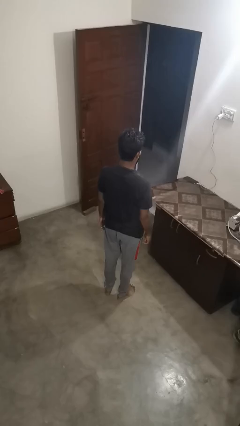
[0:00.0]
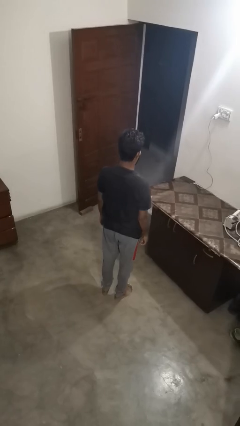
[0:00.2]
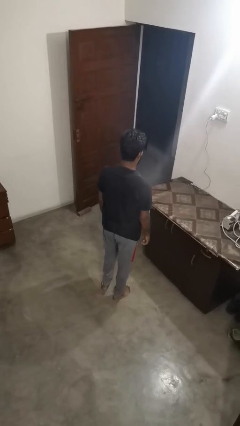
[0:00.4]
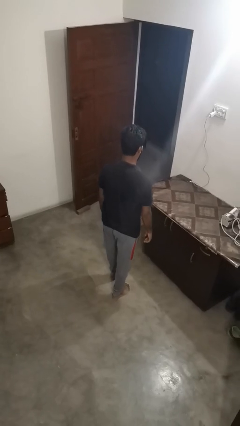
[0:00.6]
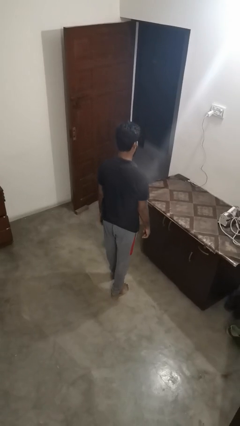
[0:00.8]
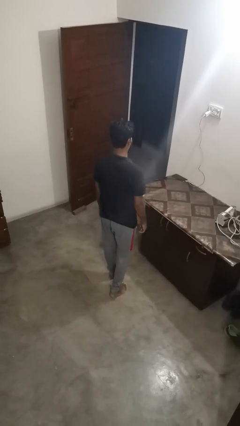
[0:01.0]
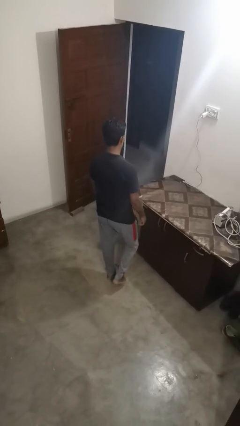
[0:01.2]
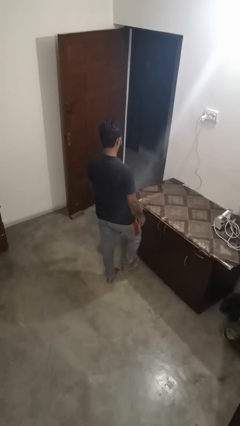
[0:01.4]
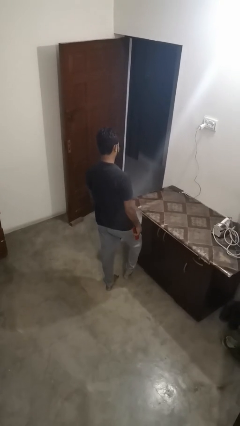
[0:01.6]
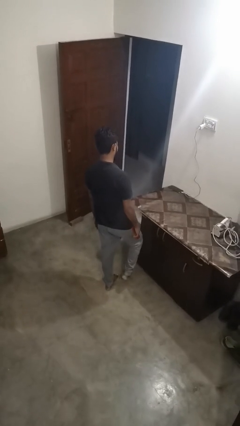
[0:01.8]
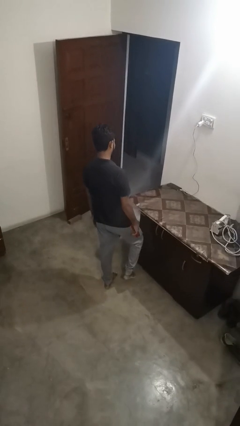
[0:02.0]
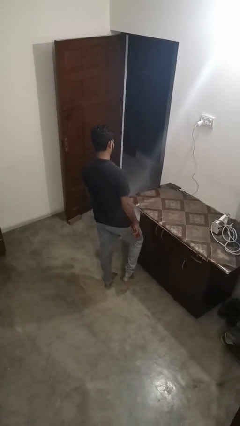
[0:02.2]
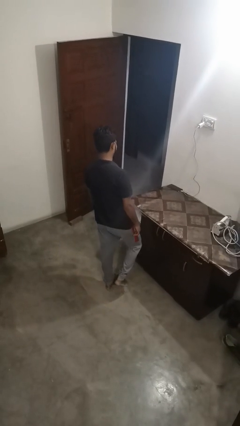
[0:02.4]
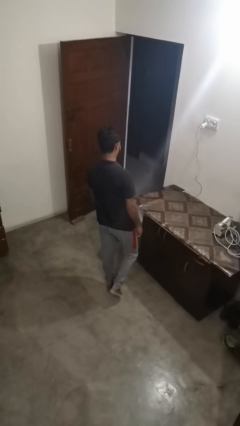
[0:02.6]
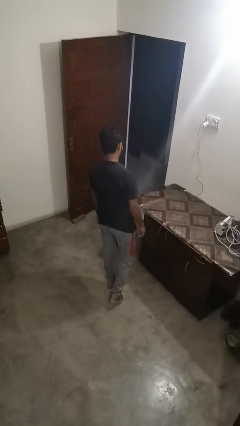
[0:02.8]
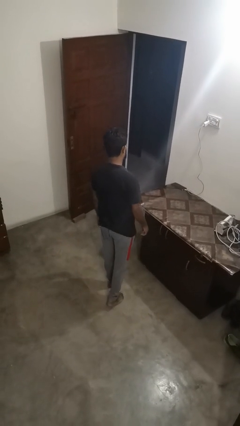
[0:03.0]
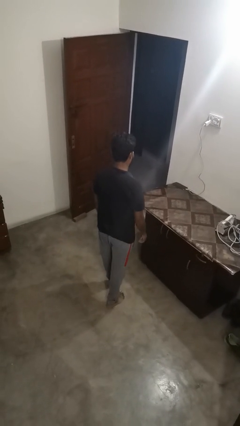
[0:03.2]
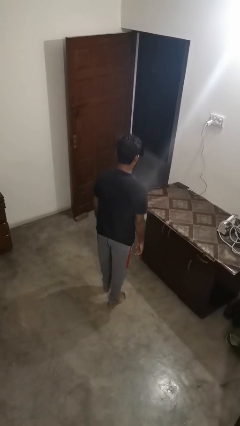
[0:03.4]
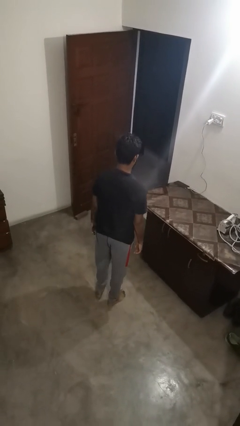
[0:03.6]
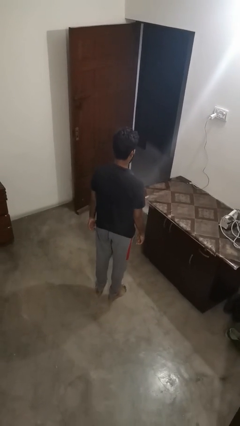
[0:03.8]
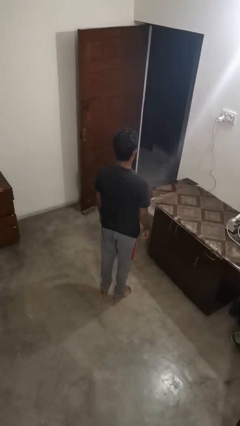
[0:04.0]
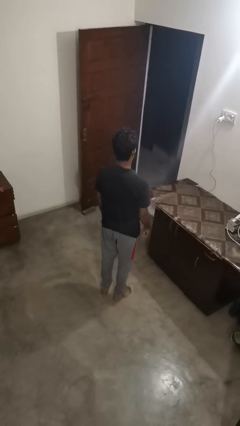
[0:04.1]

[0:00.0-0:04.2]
person bumps into table

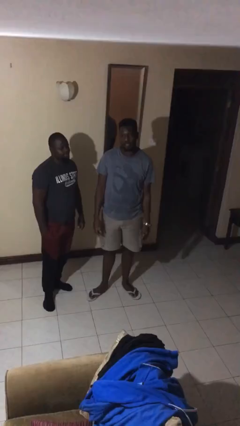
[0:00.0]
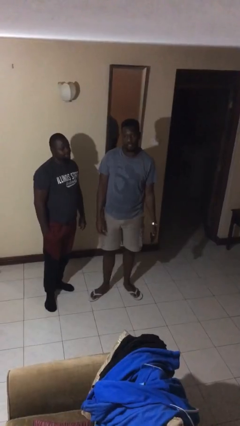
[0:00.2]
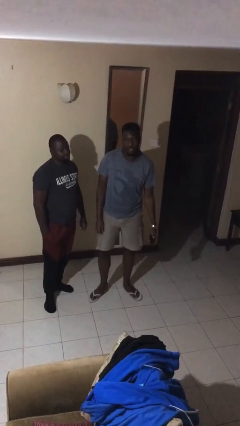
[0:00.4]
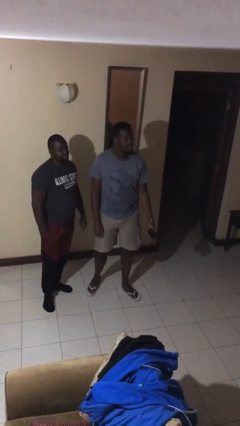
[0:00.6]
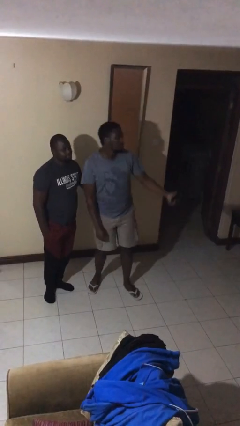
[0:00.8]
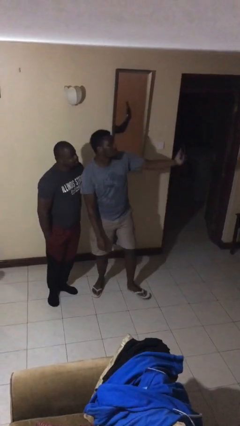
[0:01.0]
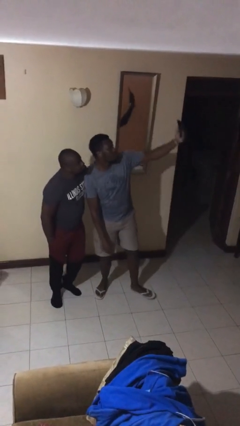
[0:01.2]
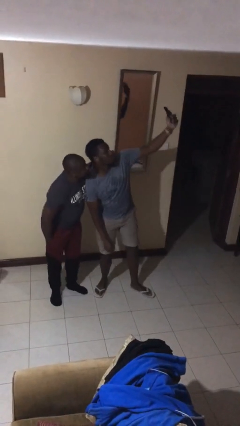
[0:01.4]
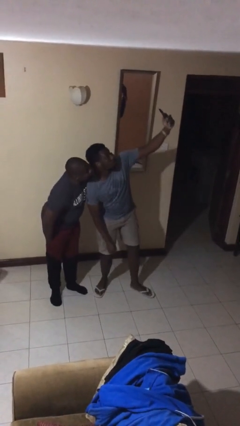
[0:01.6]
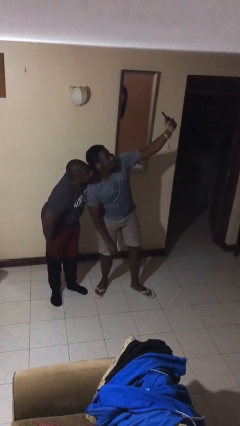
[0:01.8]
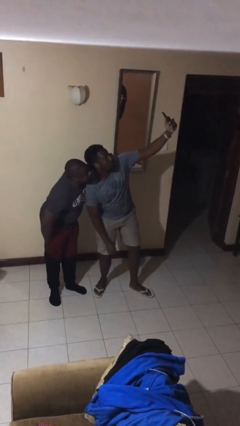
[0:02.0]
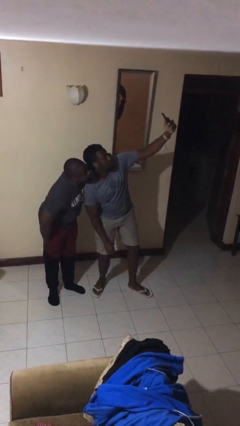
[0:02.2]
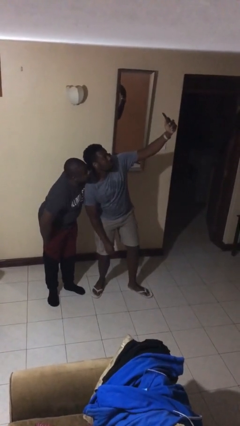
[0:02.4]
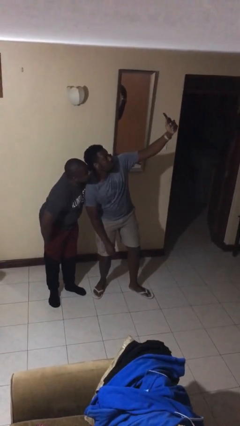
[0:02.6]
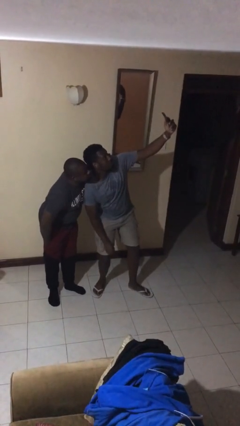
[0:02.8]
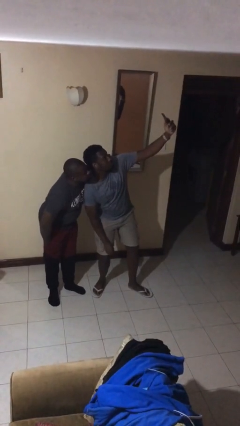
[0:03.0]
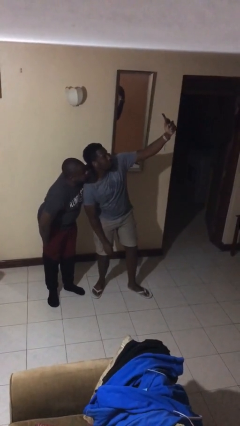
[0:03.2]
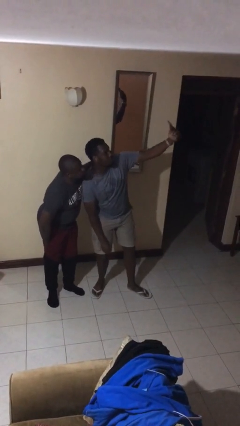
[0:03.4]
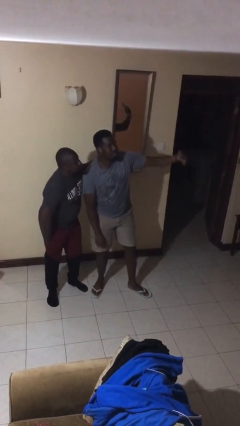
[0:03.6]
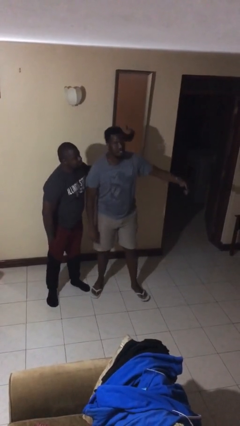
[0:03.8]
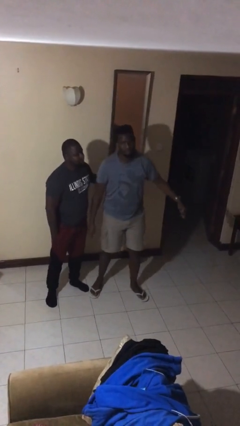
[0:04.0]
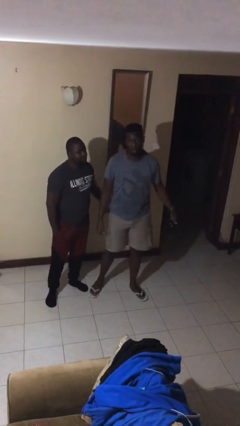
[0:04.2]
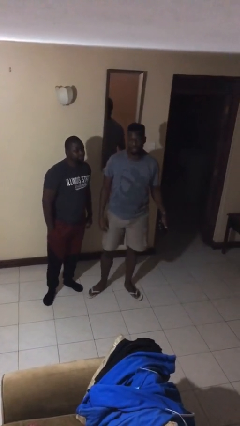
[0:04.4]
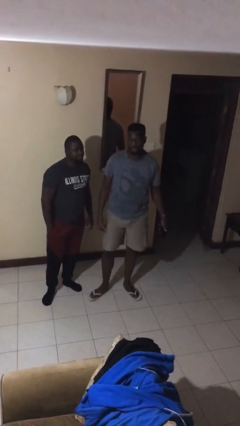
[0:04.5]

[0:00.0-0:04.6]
person takes selfie with person

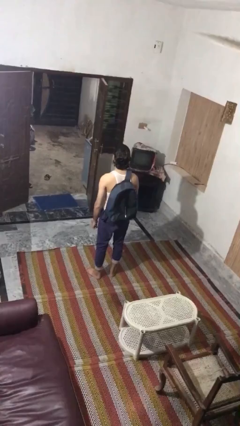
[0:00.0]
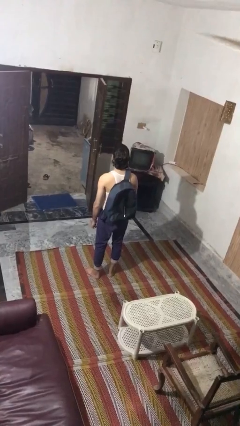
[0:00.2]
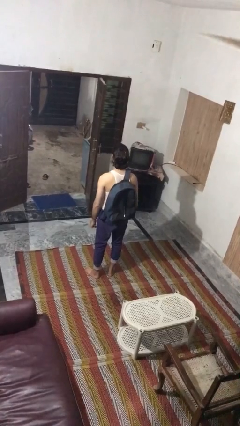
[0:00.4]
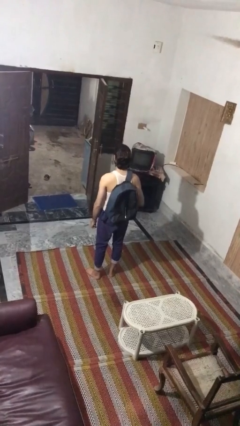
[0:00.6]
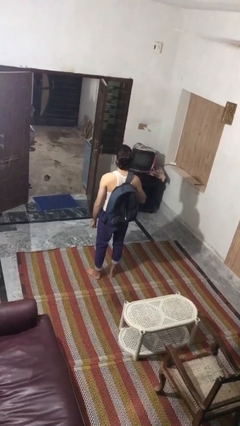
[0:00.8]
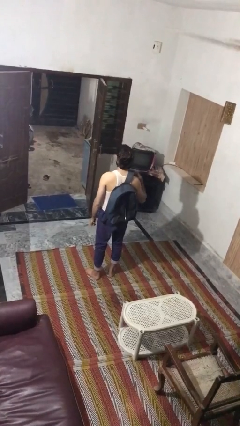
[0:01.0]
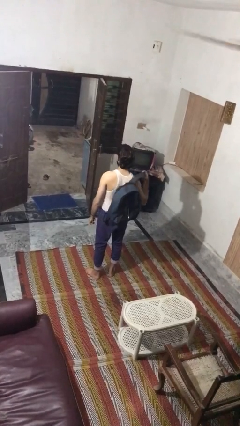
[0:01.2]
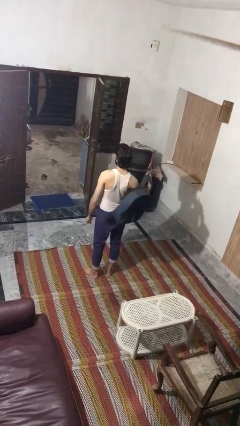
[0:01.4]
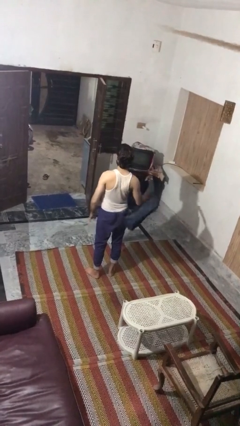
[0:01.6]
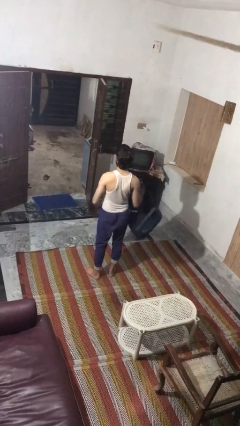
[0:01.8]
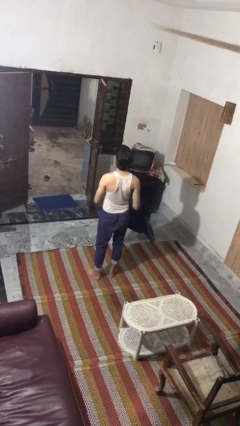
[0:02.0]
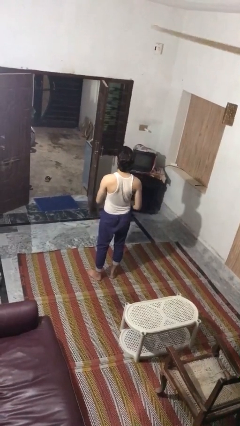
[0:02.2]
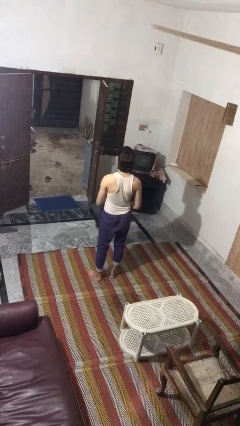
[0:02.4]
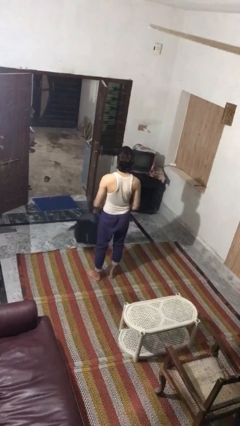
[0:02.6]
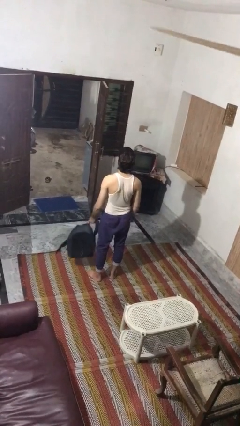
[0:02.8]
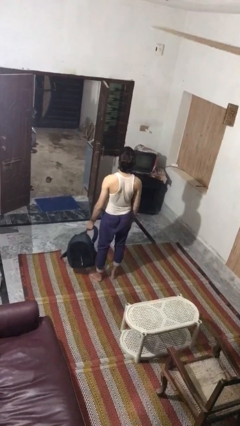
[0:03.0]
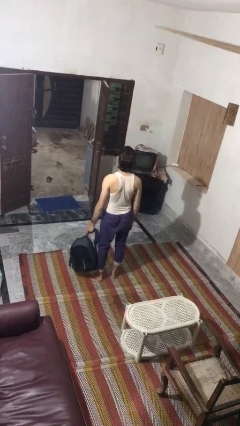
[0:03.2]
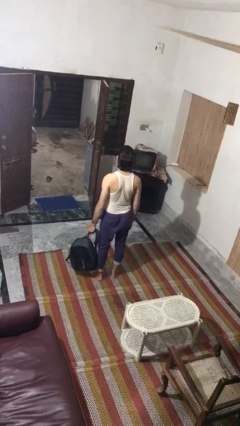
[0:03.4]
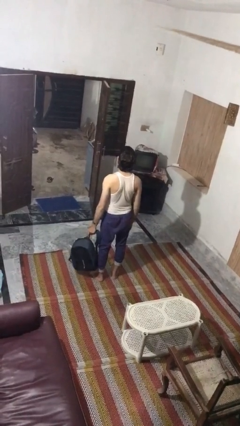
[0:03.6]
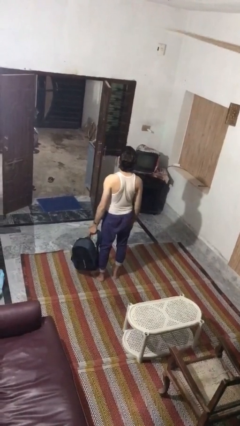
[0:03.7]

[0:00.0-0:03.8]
person takes off backpack

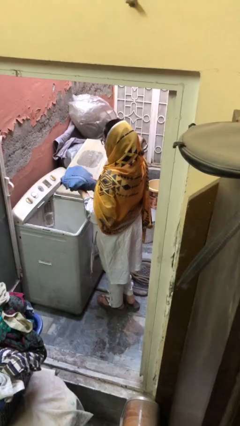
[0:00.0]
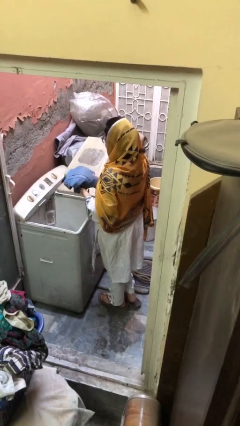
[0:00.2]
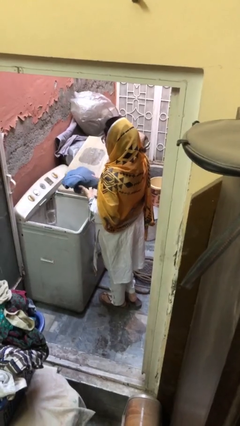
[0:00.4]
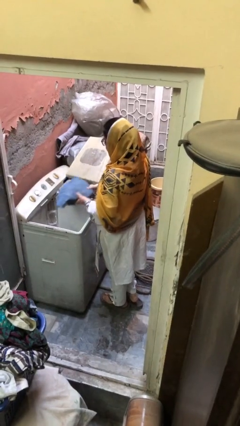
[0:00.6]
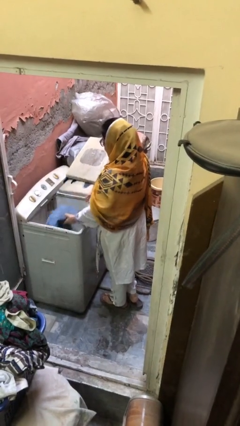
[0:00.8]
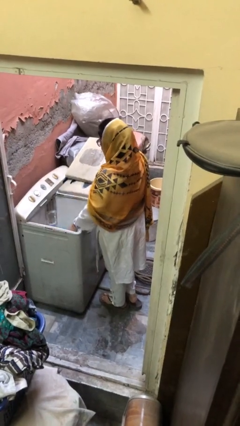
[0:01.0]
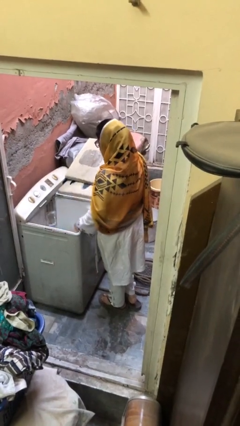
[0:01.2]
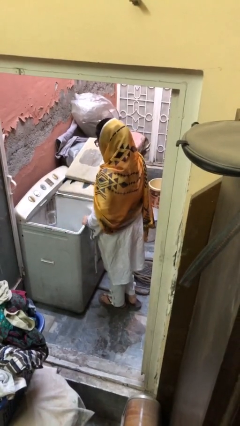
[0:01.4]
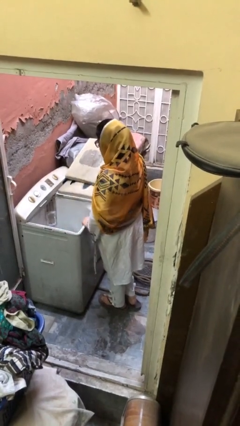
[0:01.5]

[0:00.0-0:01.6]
person loads clotheswasher

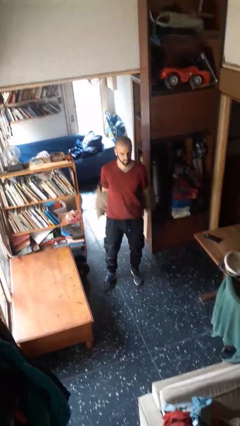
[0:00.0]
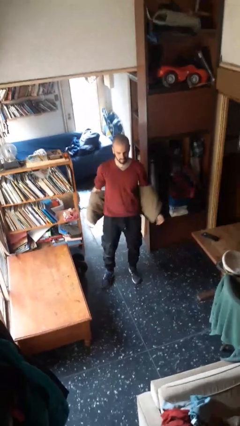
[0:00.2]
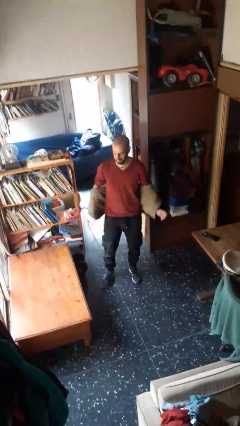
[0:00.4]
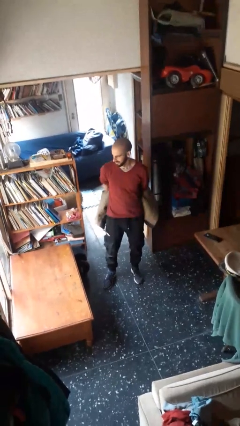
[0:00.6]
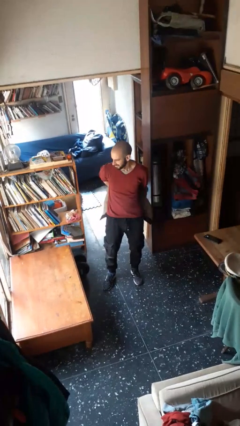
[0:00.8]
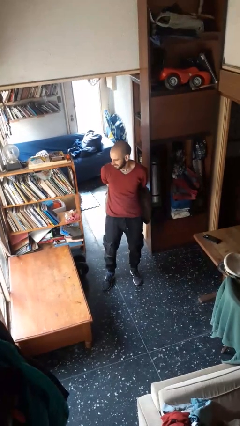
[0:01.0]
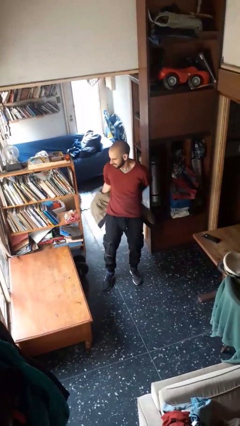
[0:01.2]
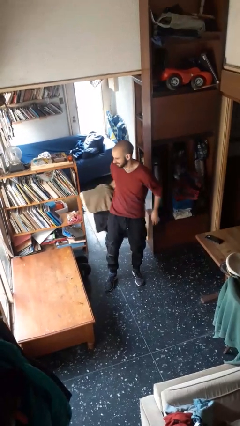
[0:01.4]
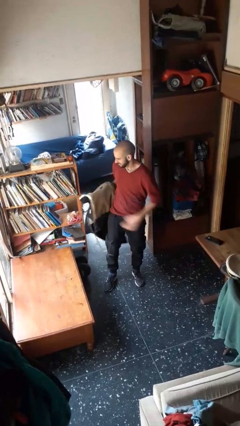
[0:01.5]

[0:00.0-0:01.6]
person takes off jacket

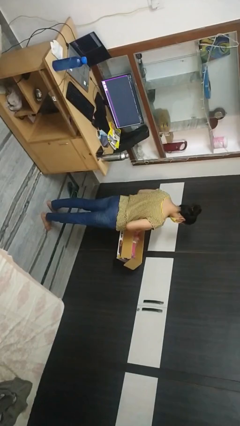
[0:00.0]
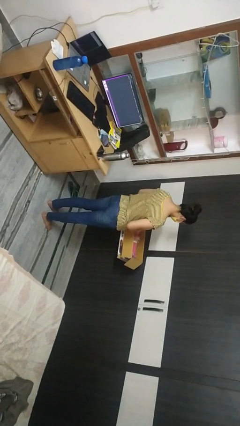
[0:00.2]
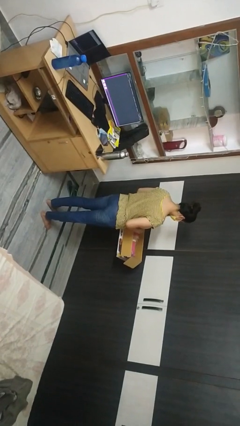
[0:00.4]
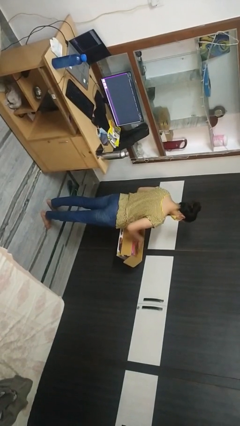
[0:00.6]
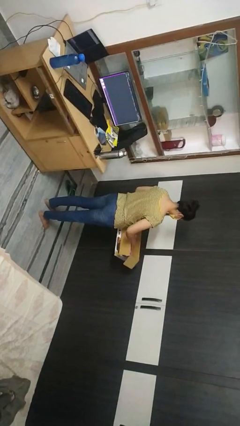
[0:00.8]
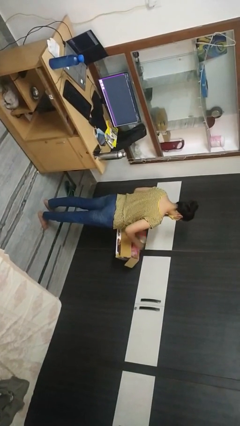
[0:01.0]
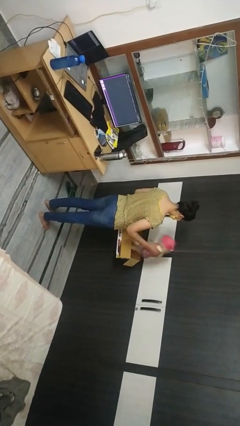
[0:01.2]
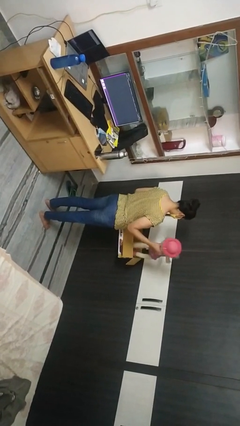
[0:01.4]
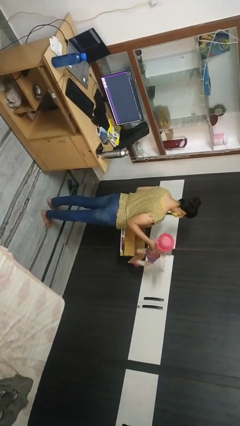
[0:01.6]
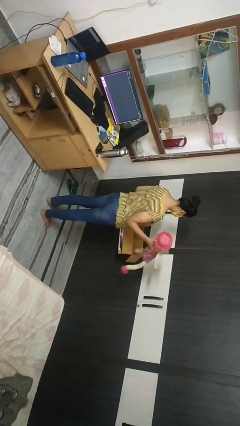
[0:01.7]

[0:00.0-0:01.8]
person takes object from box
